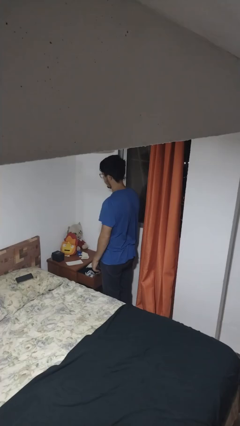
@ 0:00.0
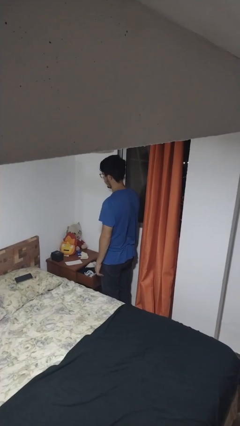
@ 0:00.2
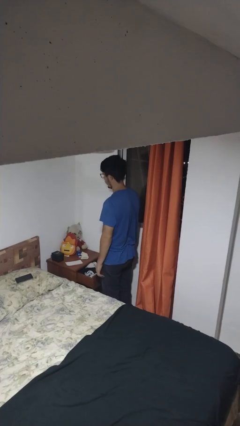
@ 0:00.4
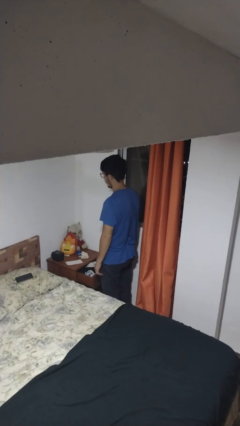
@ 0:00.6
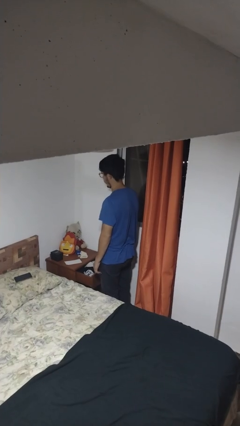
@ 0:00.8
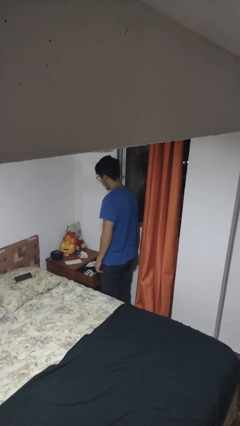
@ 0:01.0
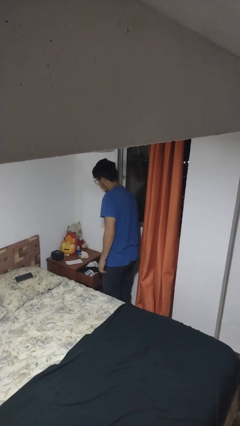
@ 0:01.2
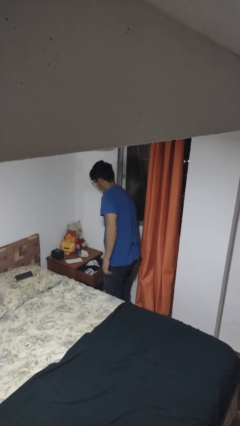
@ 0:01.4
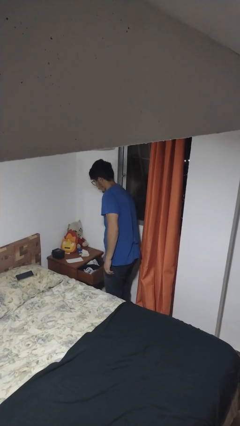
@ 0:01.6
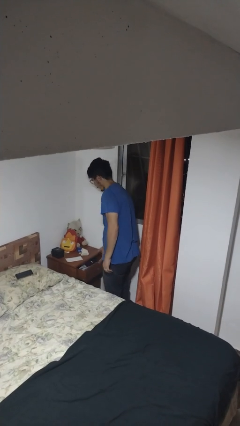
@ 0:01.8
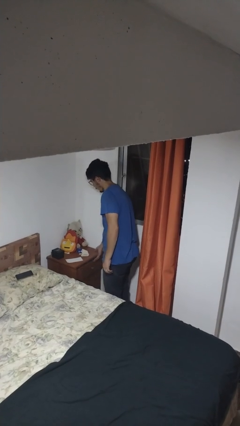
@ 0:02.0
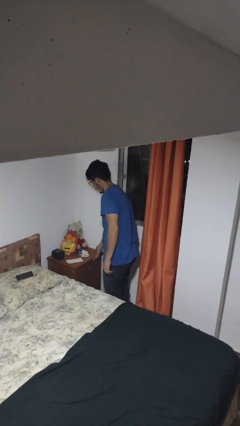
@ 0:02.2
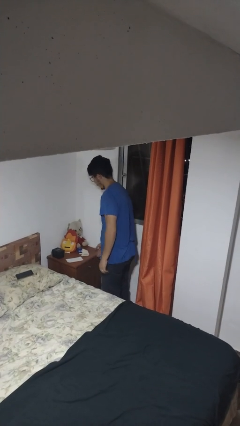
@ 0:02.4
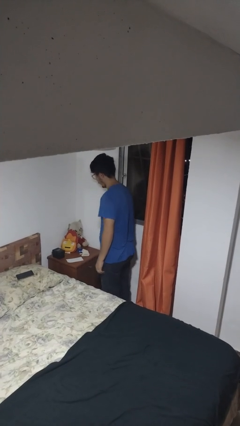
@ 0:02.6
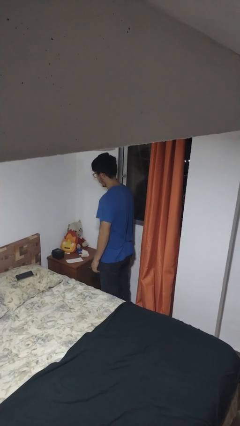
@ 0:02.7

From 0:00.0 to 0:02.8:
person closes dresser drawer

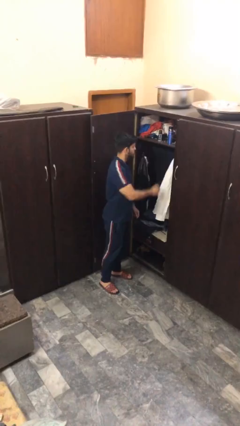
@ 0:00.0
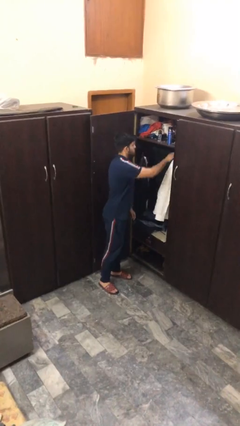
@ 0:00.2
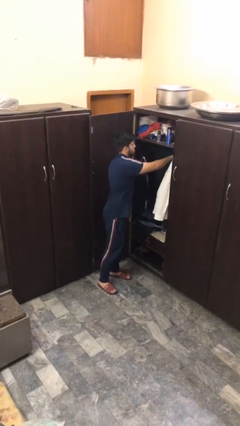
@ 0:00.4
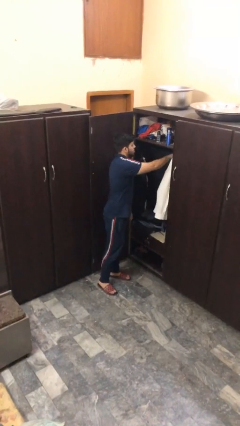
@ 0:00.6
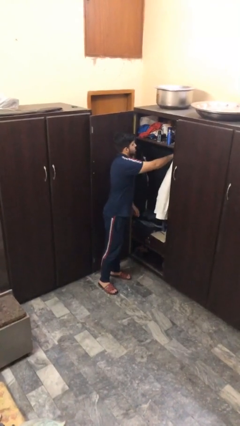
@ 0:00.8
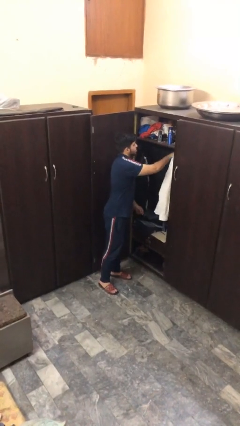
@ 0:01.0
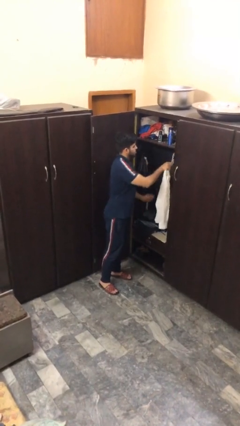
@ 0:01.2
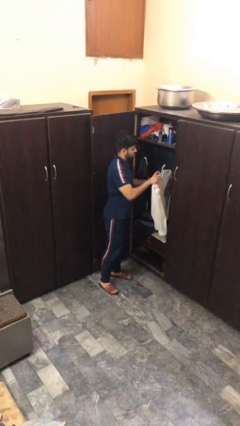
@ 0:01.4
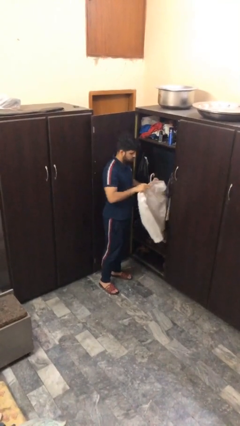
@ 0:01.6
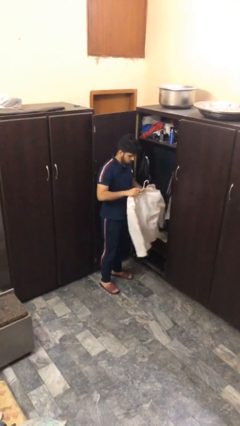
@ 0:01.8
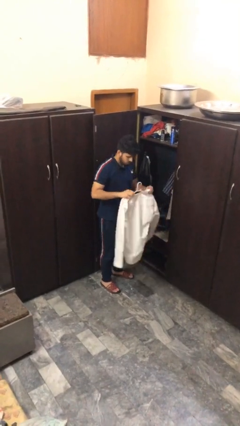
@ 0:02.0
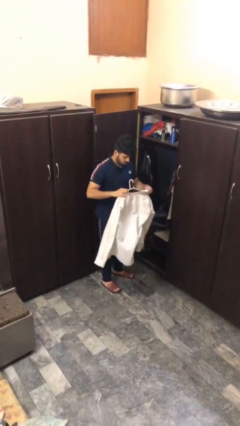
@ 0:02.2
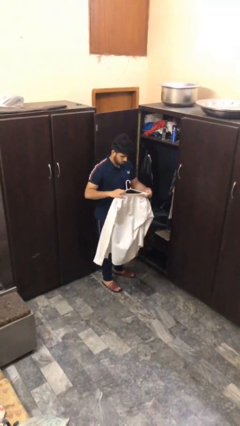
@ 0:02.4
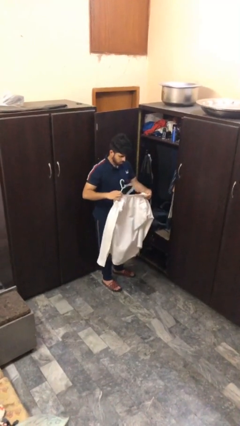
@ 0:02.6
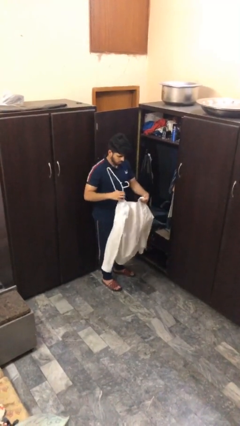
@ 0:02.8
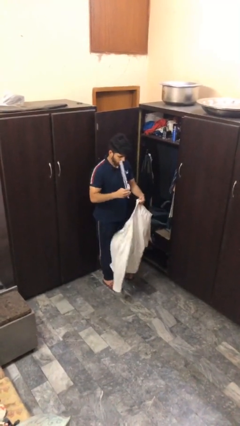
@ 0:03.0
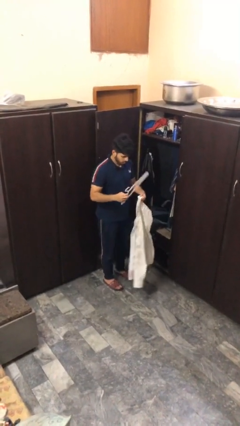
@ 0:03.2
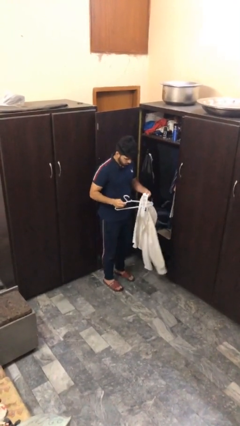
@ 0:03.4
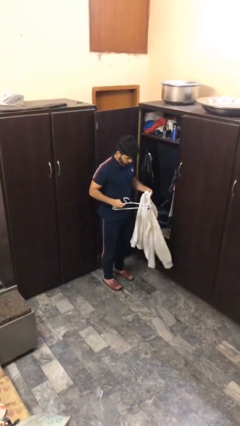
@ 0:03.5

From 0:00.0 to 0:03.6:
person takes clothes from closet

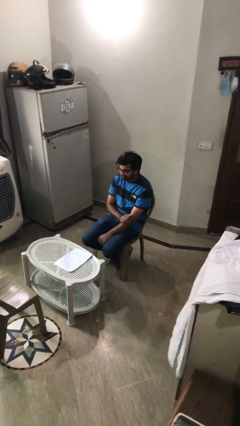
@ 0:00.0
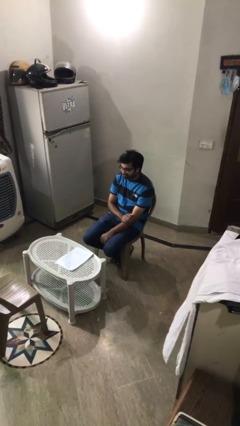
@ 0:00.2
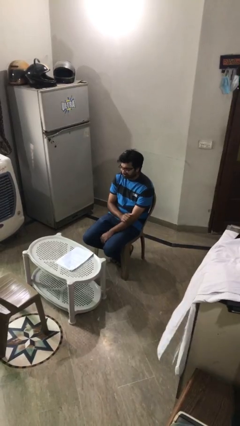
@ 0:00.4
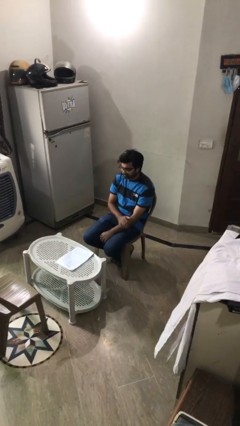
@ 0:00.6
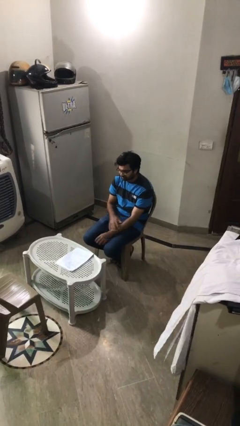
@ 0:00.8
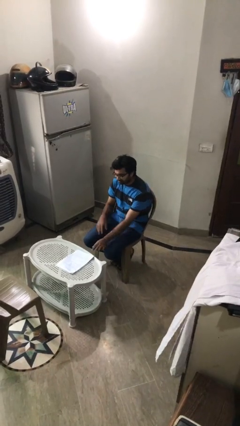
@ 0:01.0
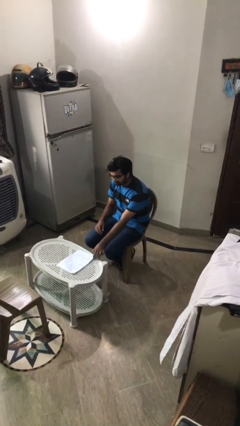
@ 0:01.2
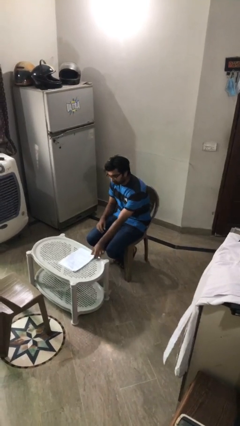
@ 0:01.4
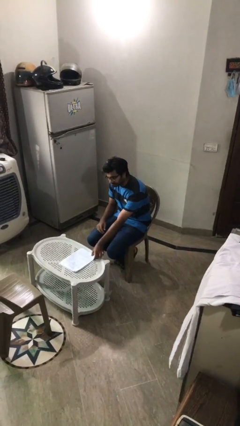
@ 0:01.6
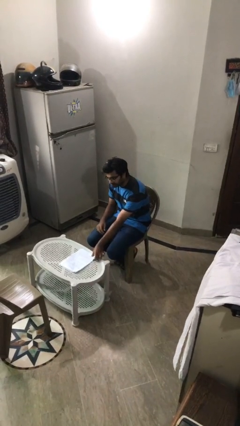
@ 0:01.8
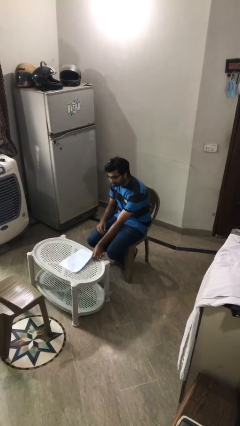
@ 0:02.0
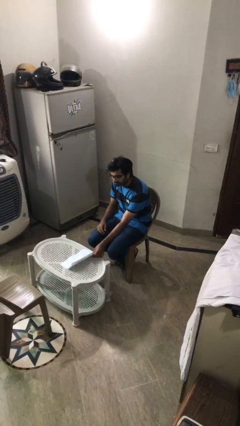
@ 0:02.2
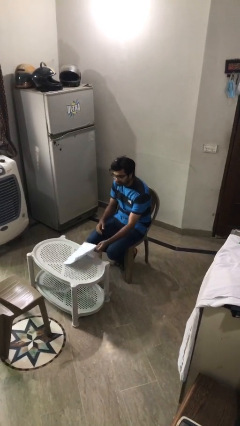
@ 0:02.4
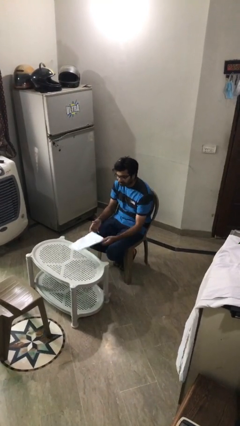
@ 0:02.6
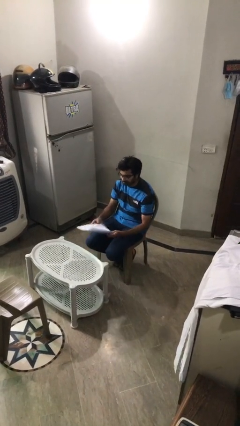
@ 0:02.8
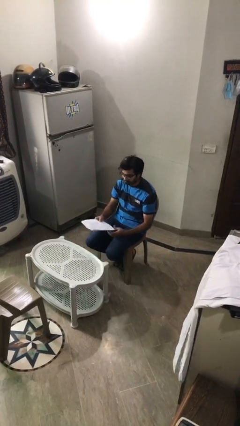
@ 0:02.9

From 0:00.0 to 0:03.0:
person picks up object from table

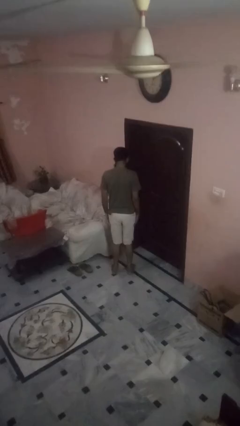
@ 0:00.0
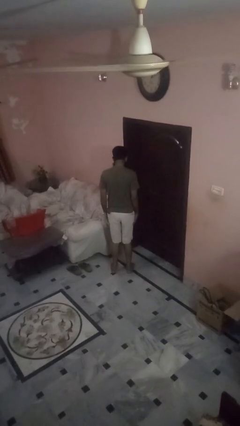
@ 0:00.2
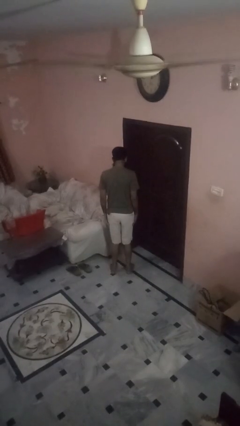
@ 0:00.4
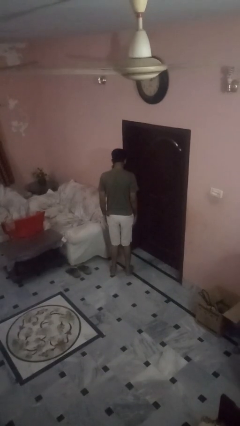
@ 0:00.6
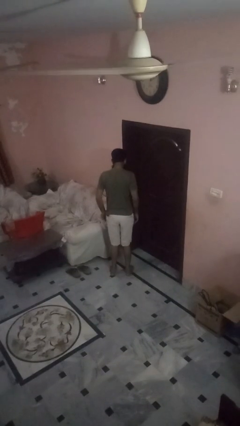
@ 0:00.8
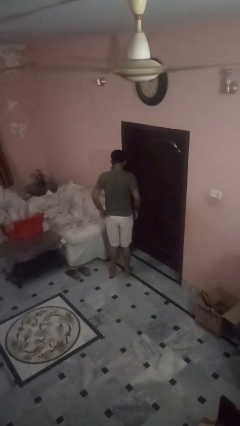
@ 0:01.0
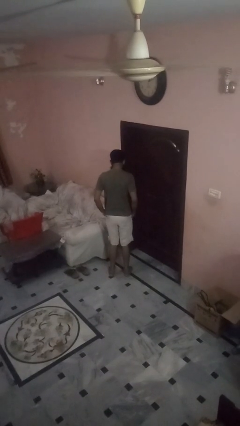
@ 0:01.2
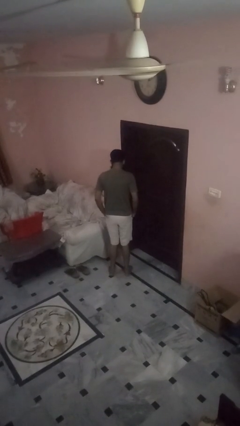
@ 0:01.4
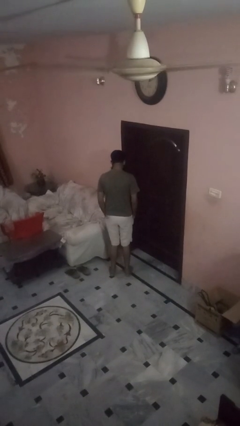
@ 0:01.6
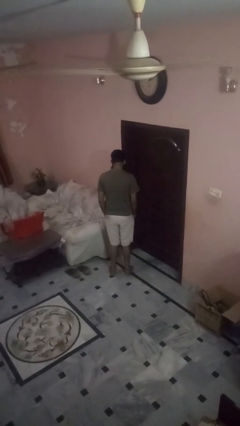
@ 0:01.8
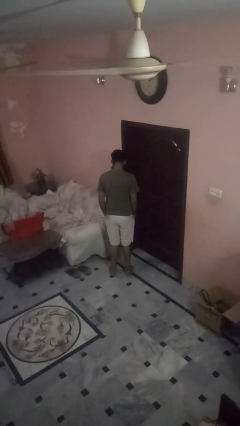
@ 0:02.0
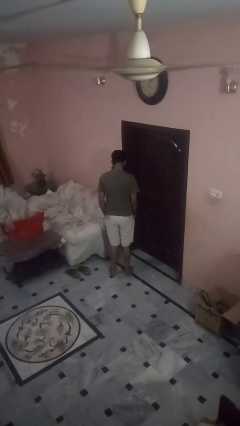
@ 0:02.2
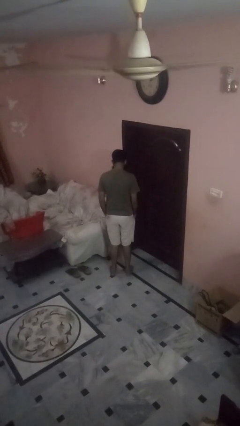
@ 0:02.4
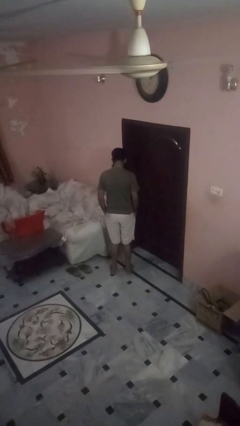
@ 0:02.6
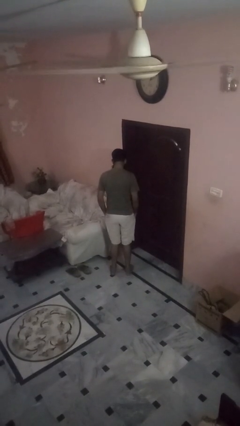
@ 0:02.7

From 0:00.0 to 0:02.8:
person puts hands in back pockets

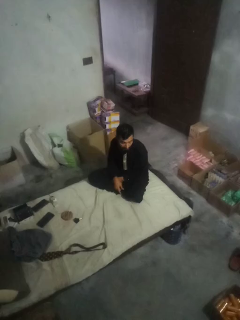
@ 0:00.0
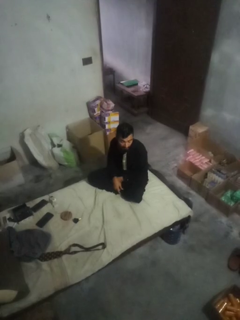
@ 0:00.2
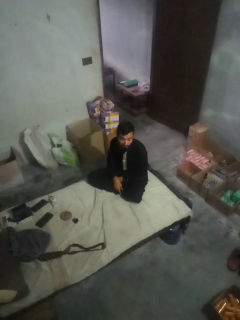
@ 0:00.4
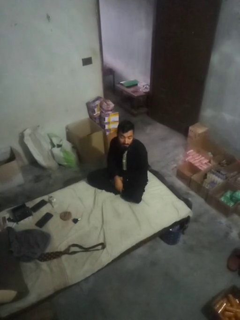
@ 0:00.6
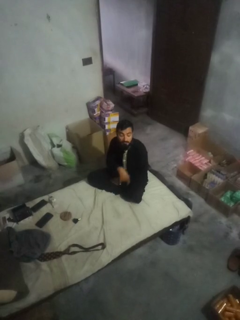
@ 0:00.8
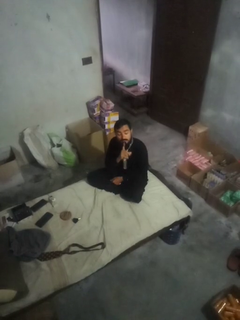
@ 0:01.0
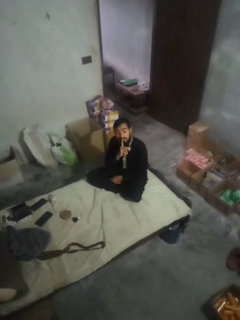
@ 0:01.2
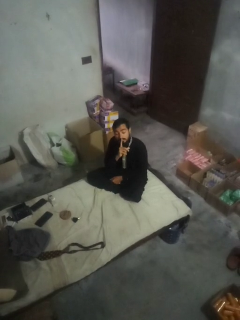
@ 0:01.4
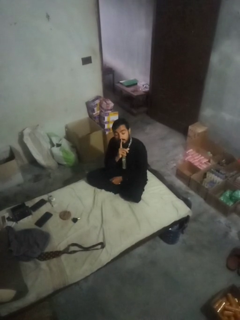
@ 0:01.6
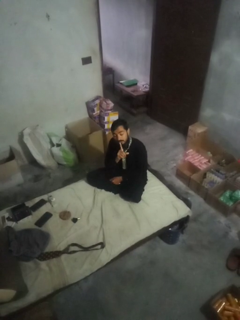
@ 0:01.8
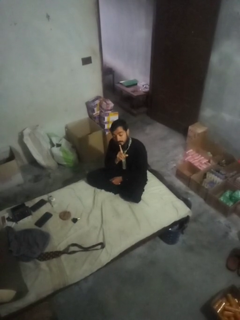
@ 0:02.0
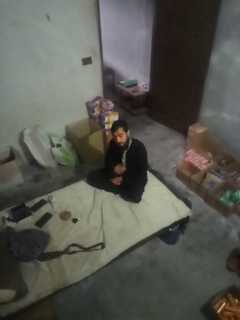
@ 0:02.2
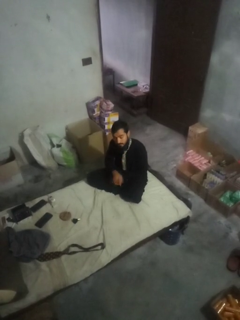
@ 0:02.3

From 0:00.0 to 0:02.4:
person gestures be quiet

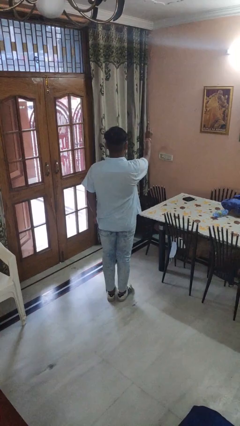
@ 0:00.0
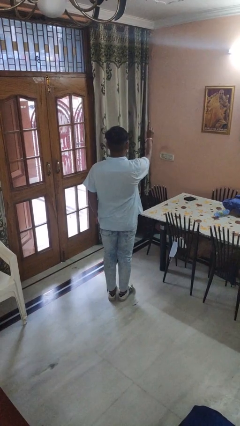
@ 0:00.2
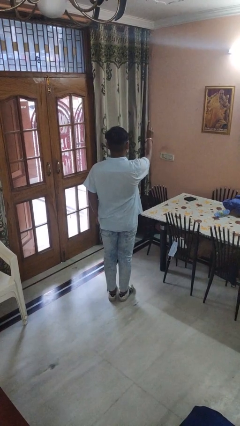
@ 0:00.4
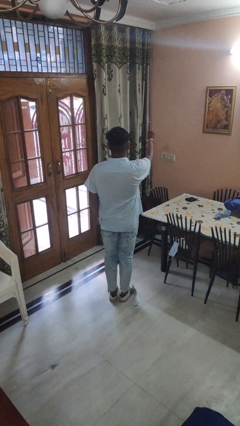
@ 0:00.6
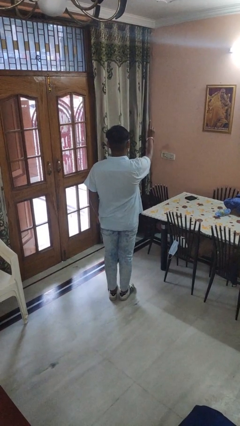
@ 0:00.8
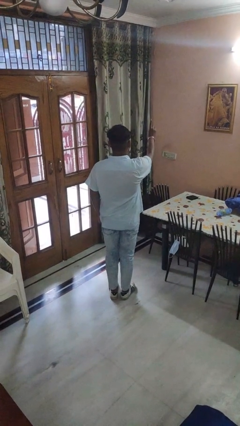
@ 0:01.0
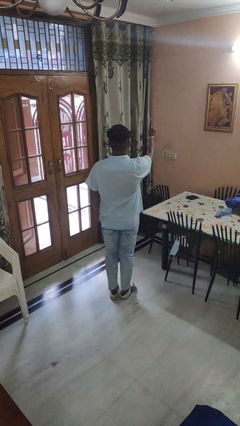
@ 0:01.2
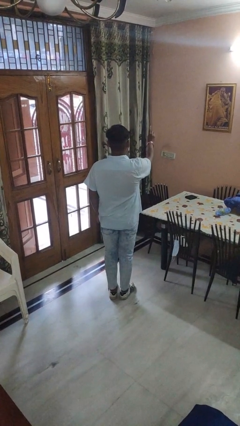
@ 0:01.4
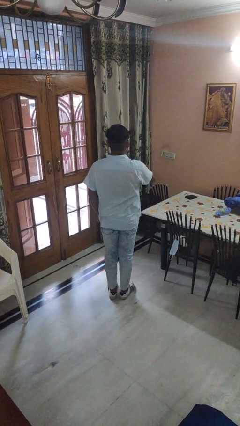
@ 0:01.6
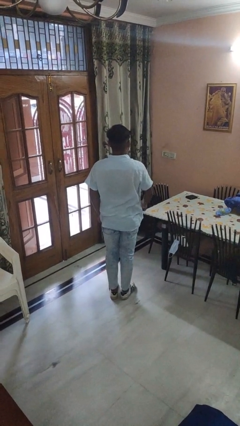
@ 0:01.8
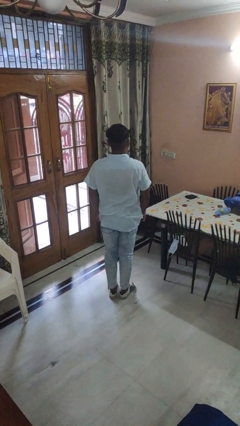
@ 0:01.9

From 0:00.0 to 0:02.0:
person gestures number one

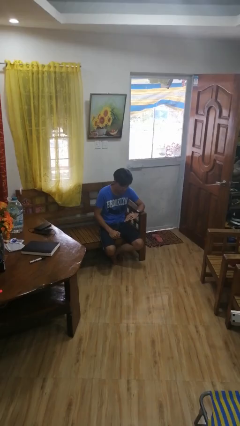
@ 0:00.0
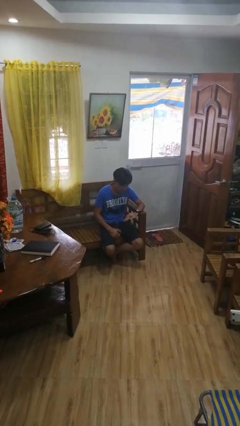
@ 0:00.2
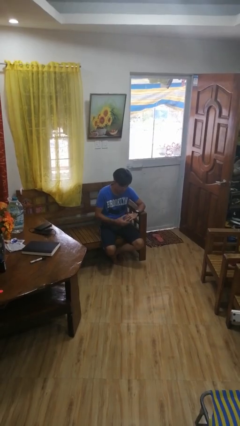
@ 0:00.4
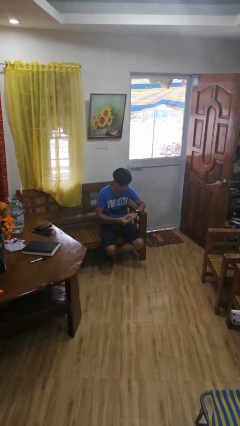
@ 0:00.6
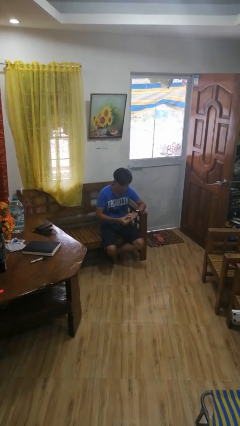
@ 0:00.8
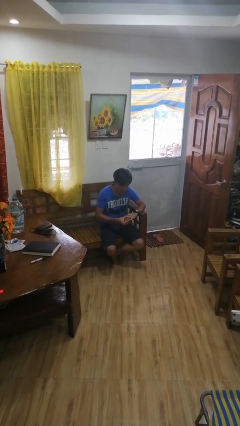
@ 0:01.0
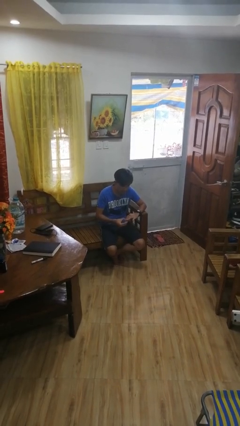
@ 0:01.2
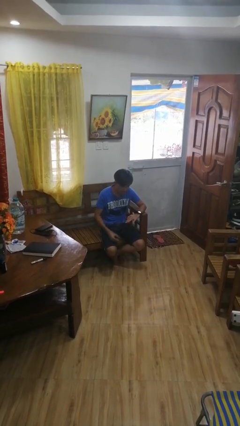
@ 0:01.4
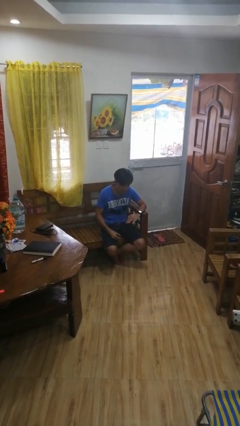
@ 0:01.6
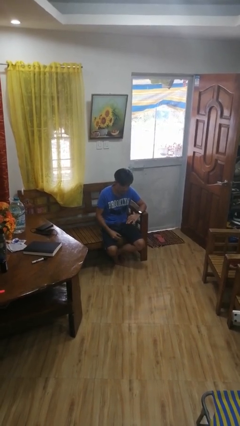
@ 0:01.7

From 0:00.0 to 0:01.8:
person takes off ring
